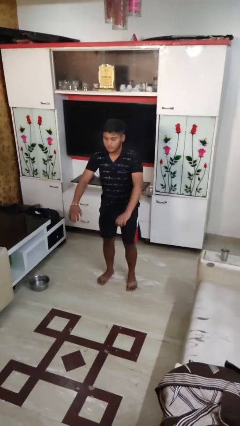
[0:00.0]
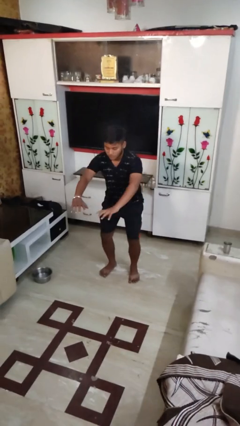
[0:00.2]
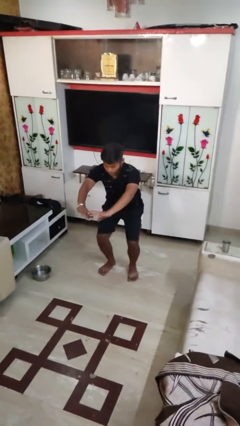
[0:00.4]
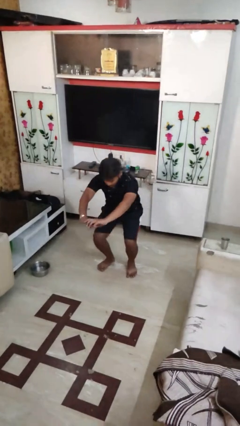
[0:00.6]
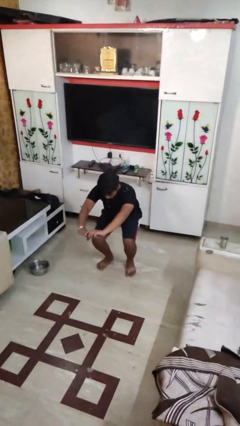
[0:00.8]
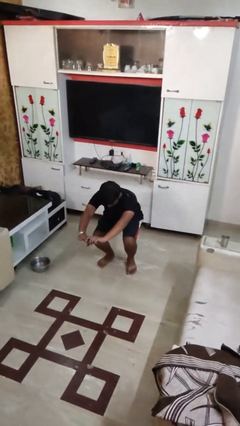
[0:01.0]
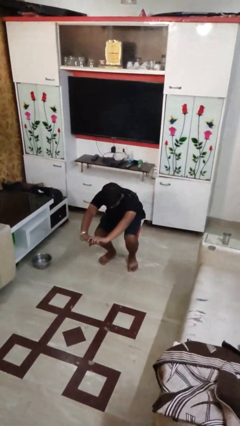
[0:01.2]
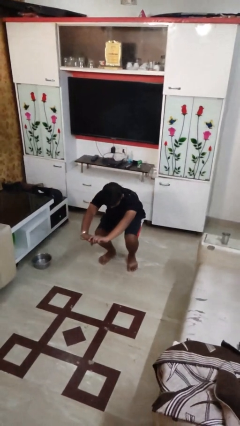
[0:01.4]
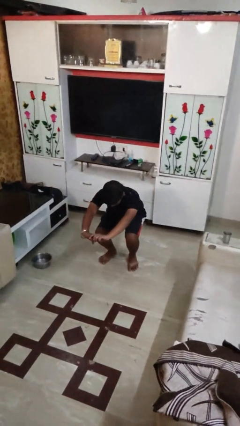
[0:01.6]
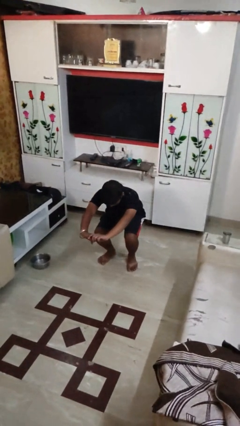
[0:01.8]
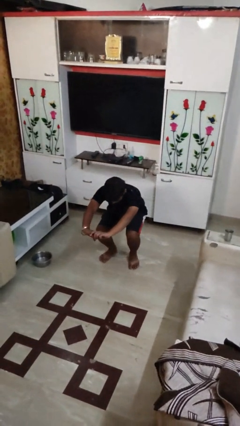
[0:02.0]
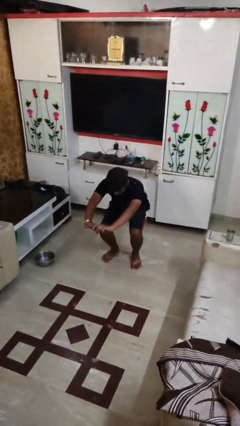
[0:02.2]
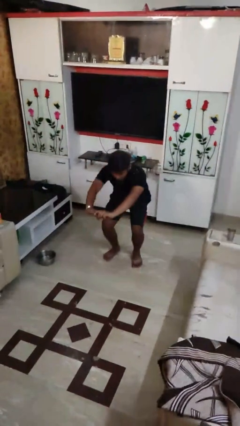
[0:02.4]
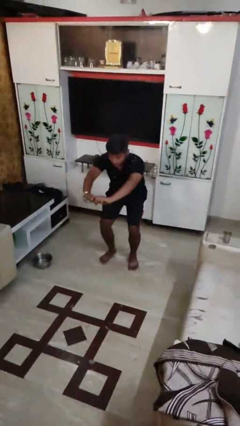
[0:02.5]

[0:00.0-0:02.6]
person squats

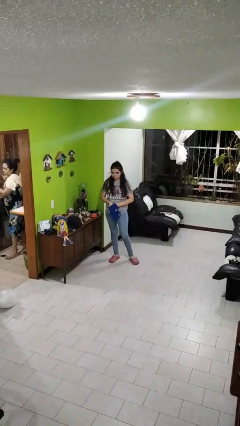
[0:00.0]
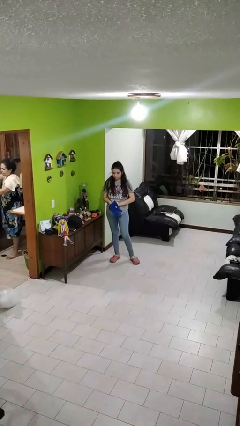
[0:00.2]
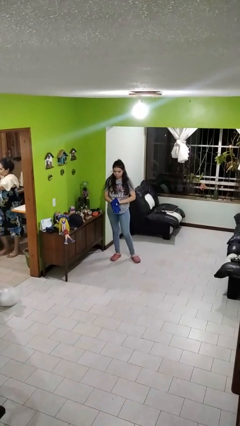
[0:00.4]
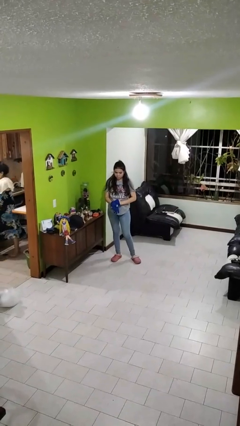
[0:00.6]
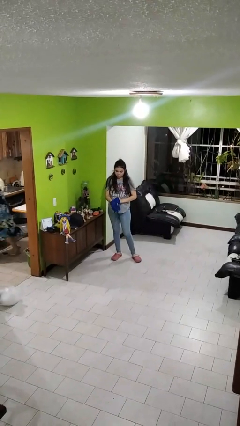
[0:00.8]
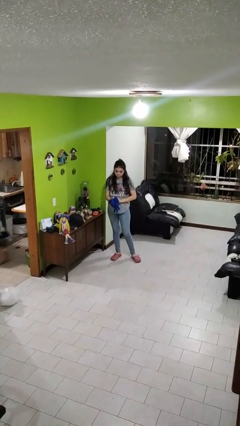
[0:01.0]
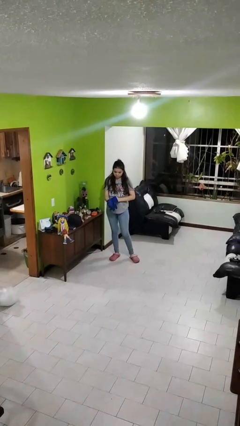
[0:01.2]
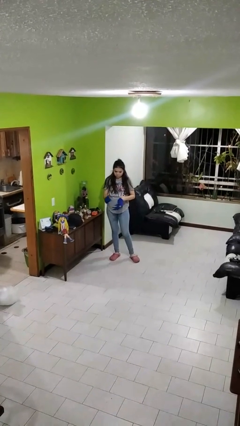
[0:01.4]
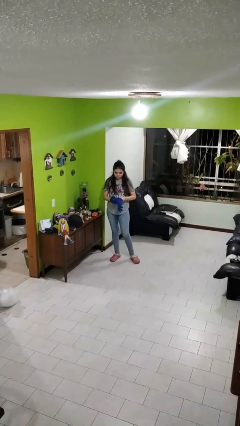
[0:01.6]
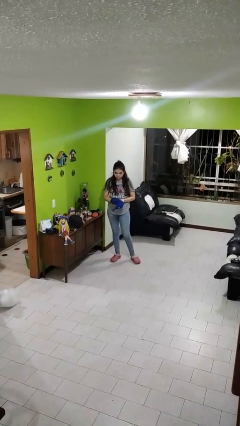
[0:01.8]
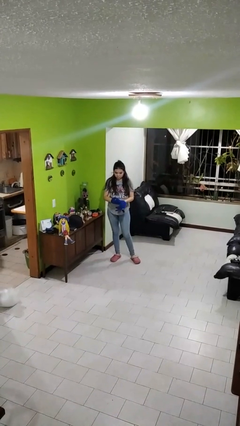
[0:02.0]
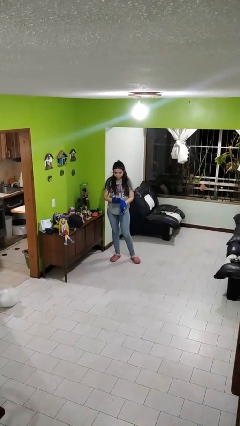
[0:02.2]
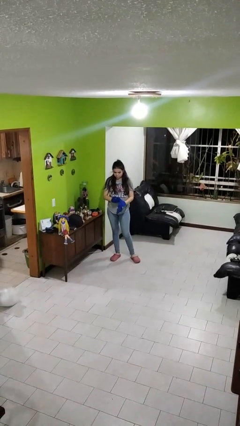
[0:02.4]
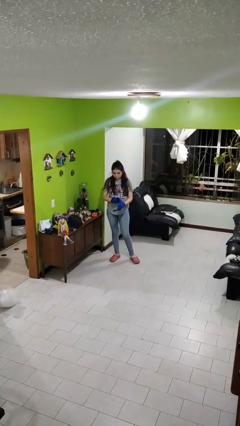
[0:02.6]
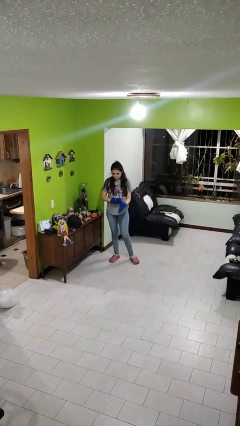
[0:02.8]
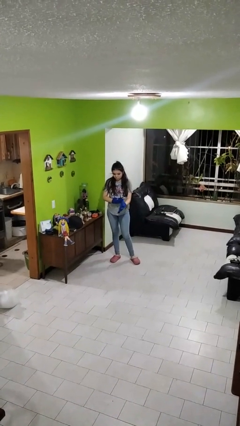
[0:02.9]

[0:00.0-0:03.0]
person puts on gloves

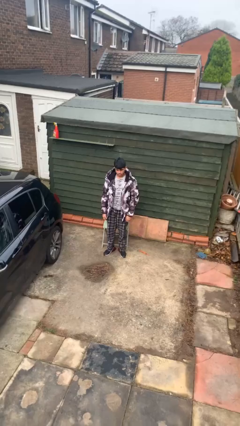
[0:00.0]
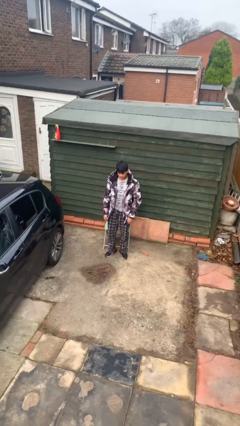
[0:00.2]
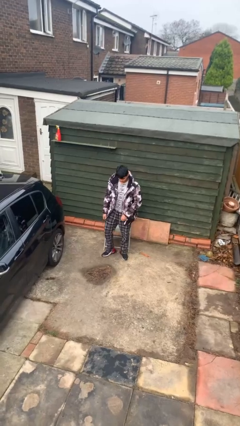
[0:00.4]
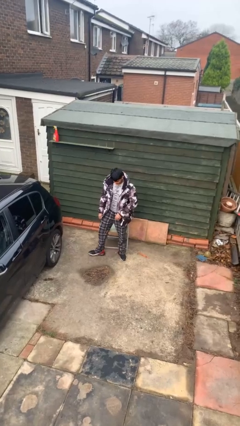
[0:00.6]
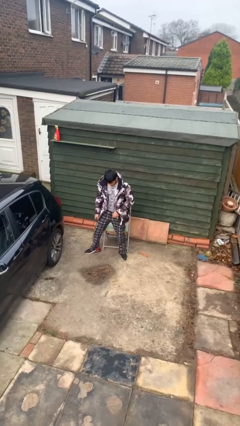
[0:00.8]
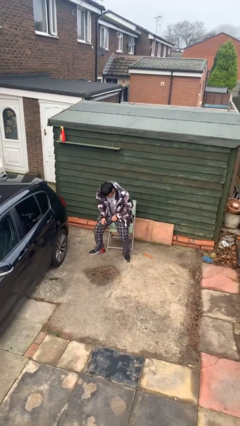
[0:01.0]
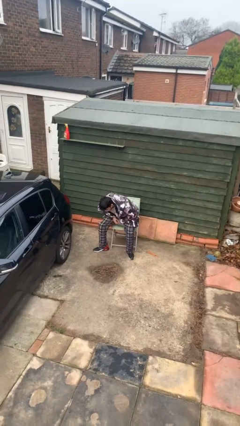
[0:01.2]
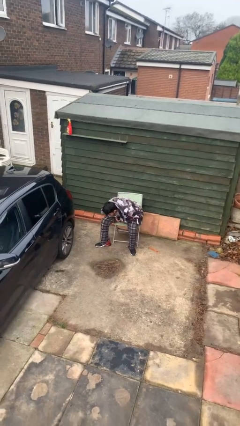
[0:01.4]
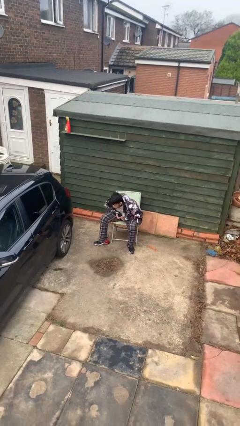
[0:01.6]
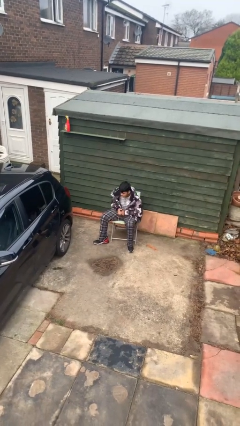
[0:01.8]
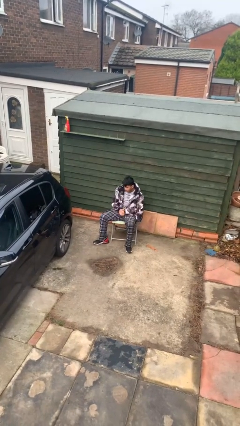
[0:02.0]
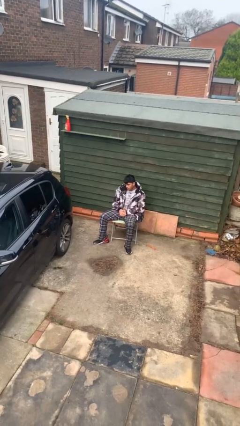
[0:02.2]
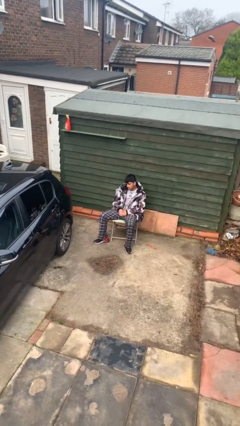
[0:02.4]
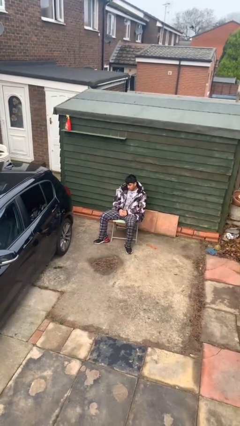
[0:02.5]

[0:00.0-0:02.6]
person sits down

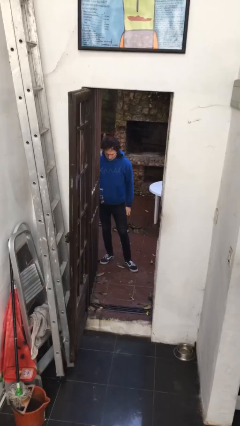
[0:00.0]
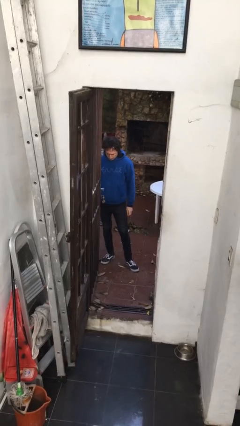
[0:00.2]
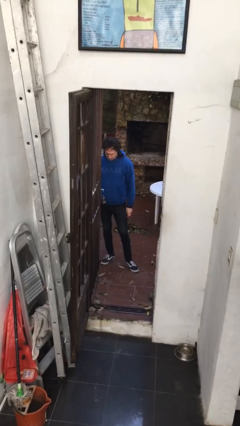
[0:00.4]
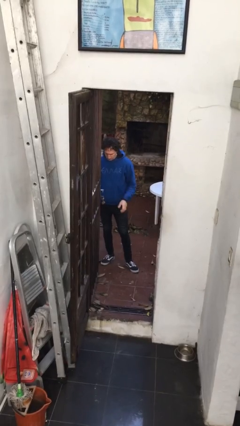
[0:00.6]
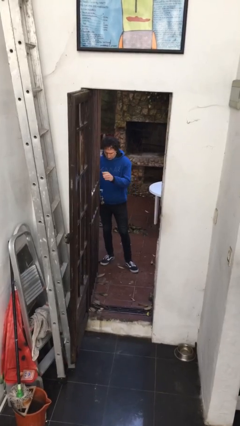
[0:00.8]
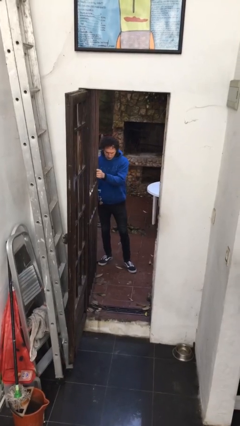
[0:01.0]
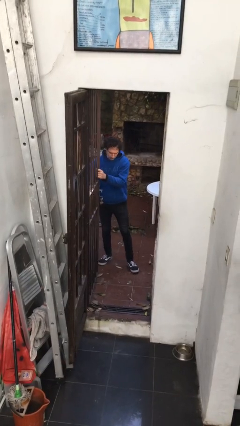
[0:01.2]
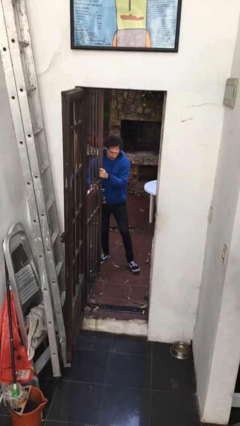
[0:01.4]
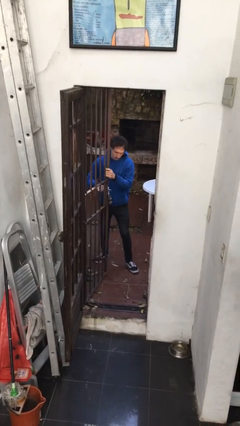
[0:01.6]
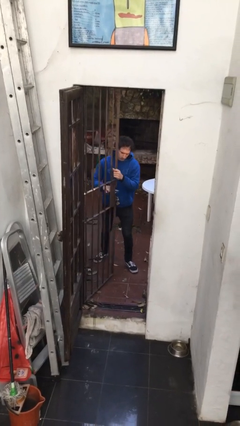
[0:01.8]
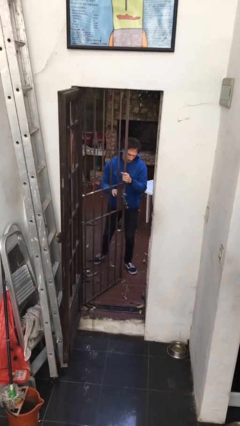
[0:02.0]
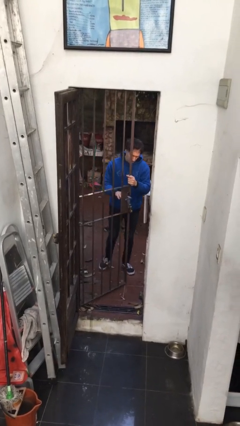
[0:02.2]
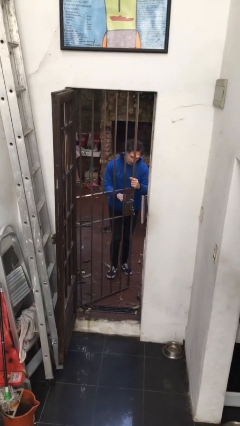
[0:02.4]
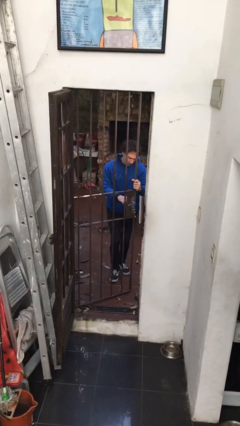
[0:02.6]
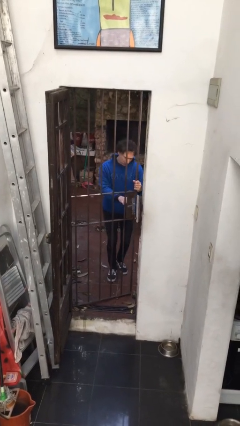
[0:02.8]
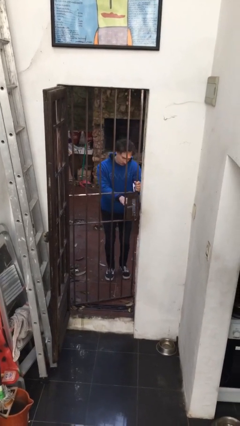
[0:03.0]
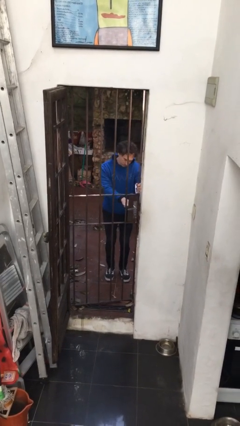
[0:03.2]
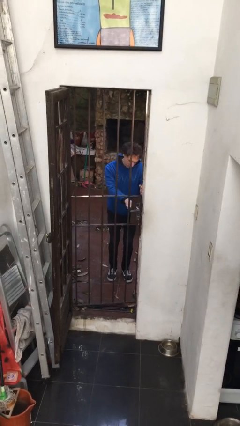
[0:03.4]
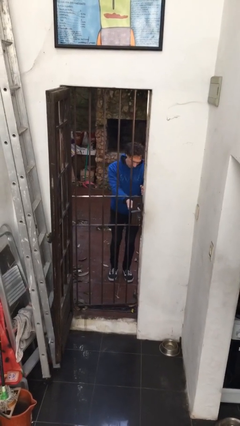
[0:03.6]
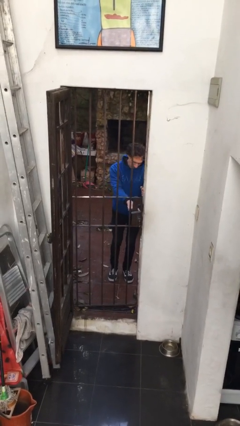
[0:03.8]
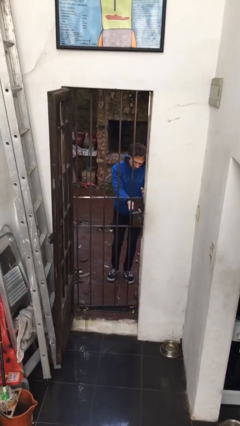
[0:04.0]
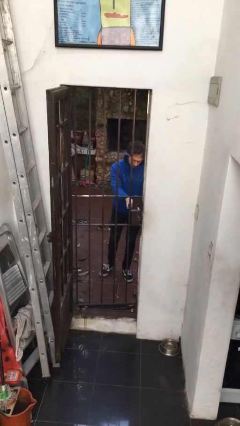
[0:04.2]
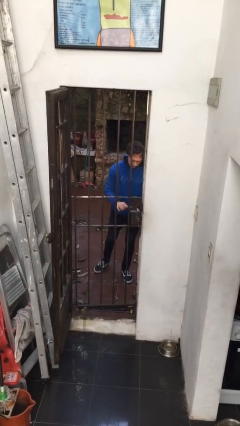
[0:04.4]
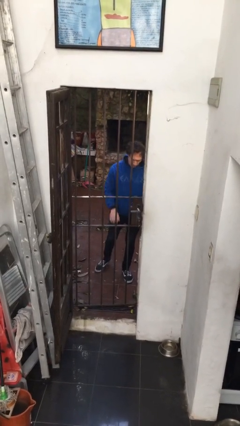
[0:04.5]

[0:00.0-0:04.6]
person closes gate

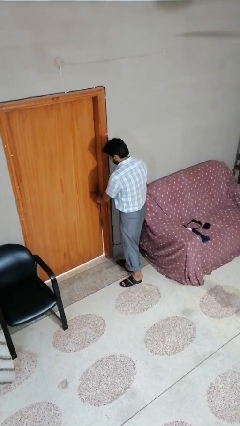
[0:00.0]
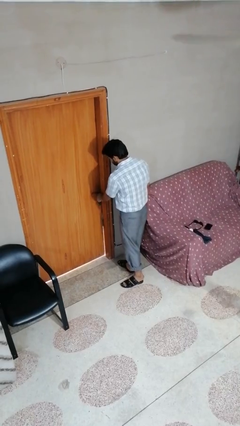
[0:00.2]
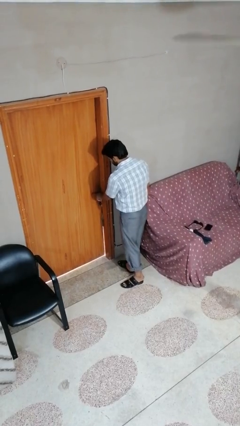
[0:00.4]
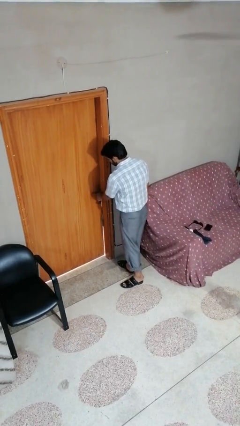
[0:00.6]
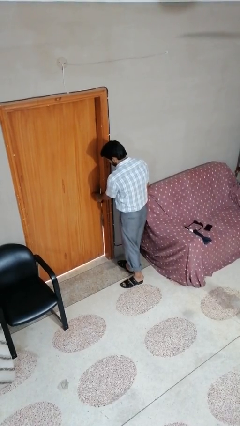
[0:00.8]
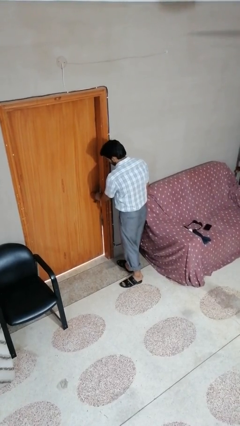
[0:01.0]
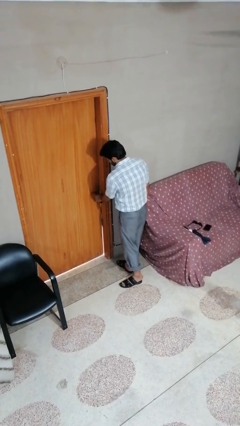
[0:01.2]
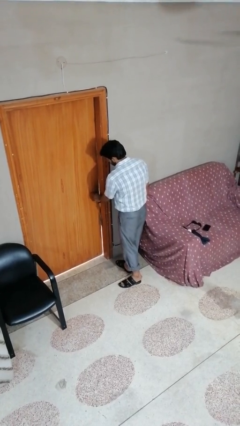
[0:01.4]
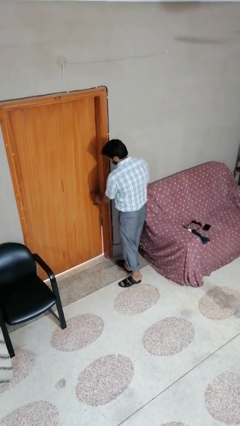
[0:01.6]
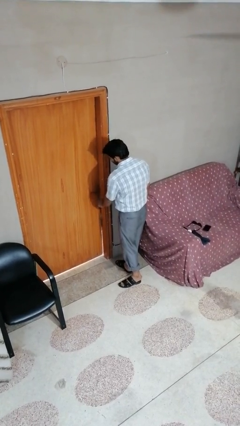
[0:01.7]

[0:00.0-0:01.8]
person unlocks door with keys

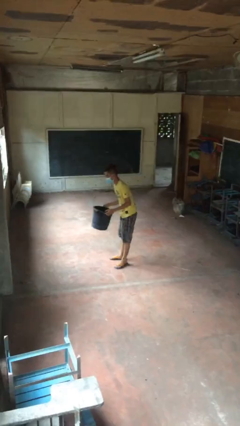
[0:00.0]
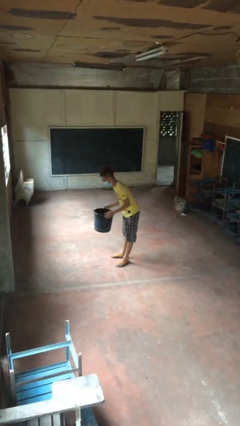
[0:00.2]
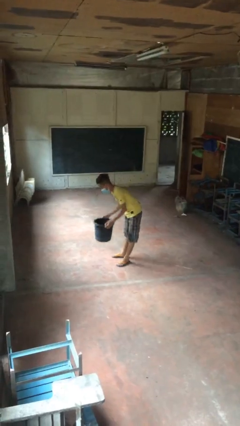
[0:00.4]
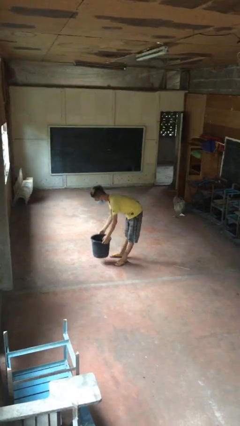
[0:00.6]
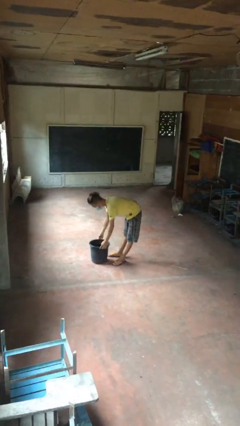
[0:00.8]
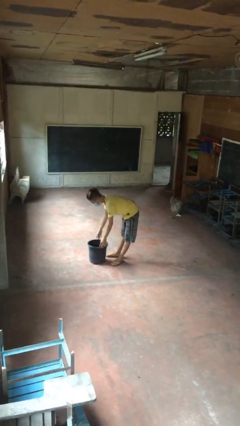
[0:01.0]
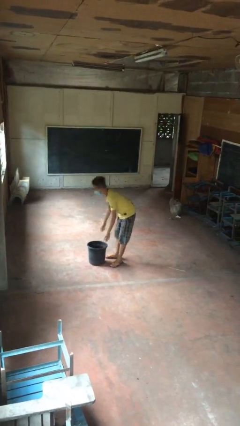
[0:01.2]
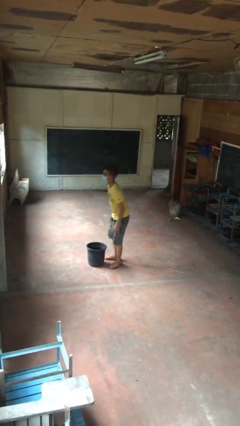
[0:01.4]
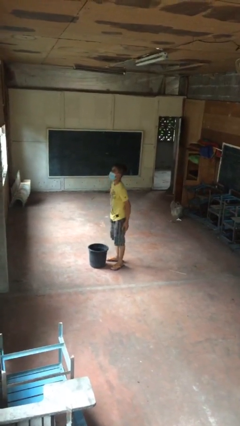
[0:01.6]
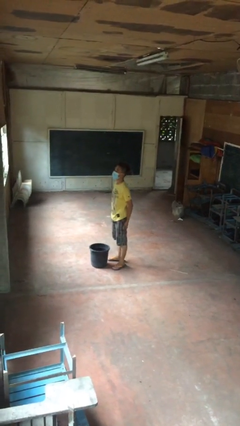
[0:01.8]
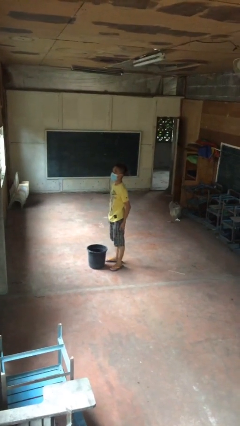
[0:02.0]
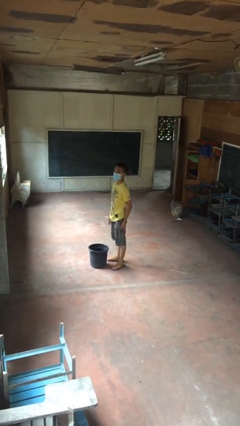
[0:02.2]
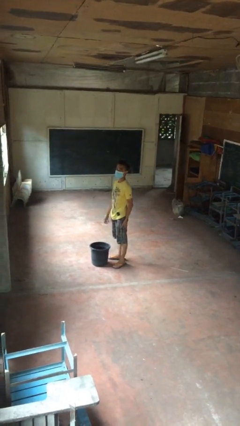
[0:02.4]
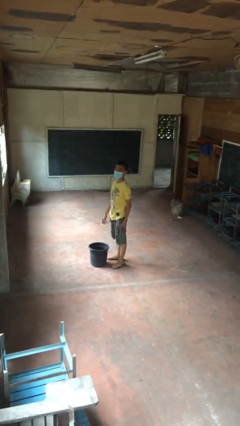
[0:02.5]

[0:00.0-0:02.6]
person puts down object on floor
